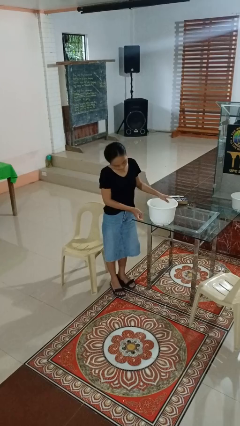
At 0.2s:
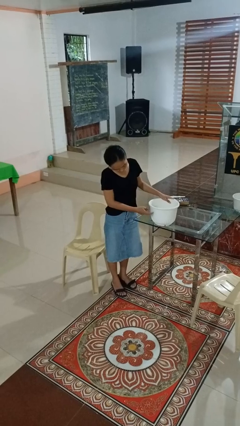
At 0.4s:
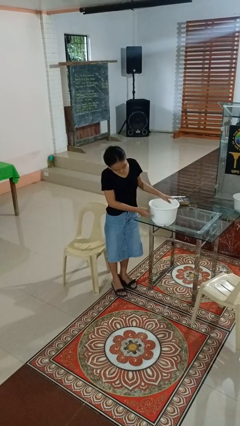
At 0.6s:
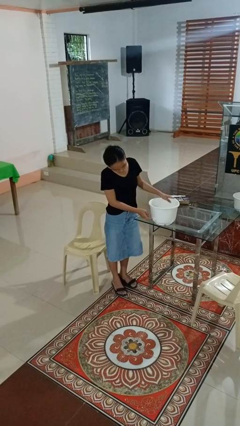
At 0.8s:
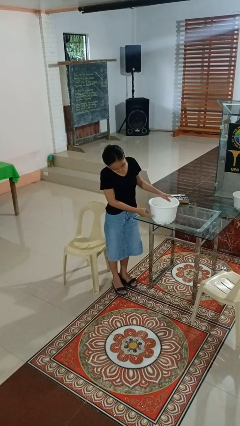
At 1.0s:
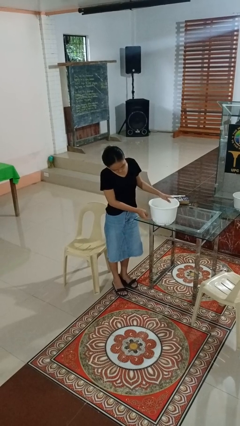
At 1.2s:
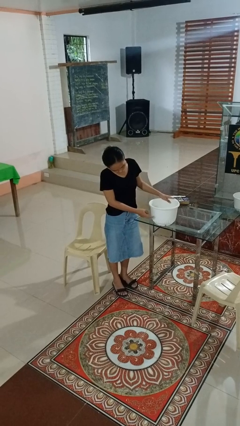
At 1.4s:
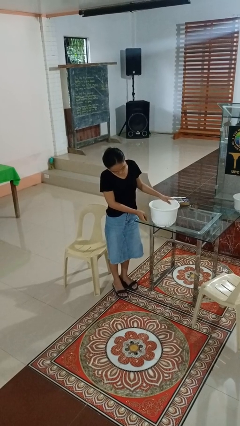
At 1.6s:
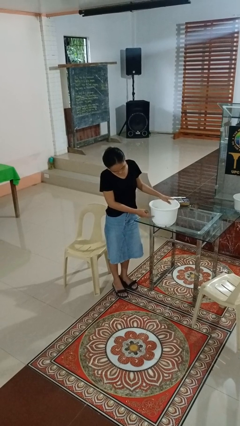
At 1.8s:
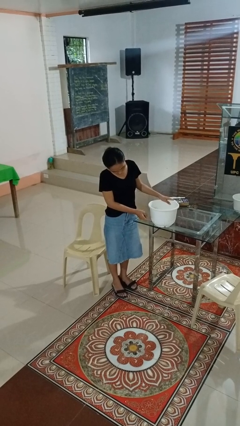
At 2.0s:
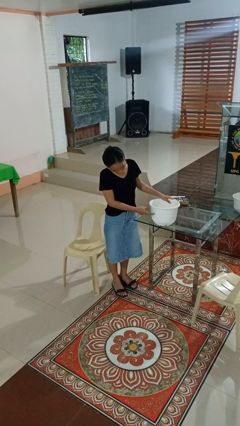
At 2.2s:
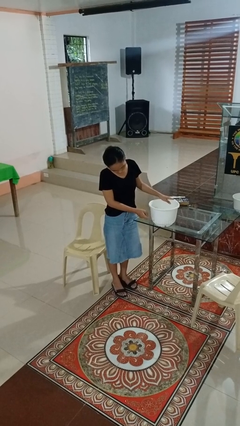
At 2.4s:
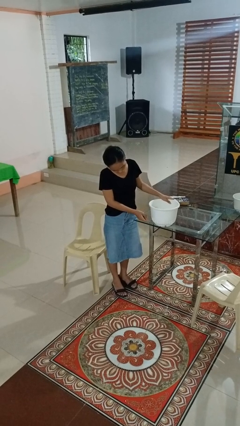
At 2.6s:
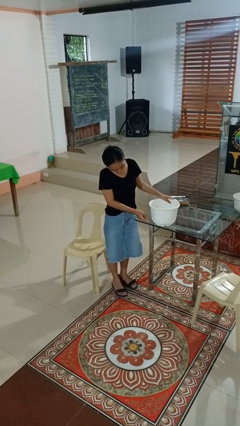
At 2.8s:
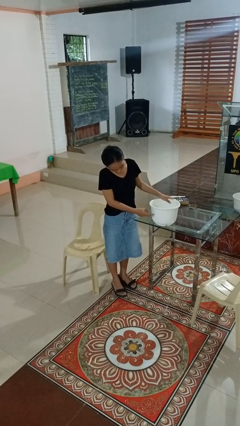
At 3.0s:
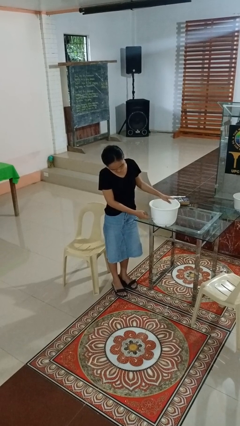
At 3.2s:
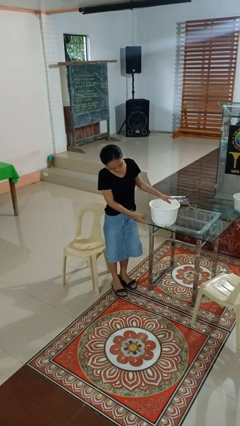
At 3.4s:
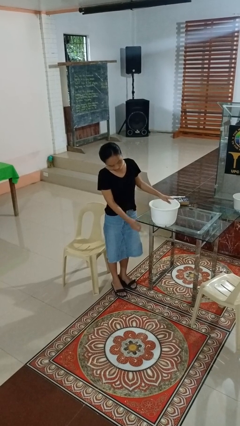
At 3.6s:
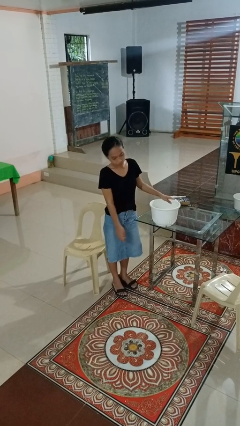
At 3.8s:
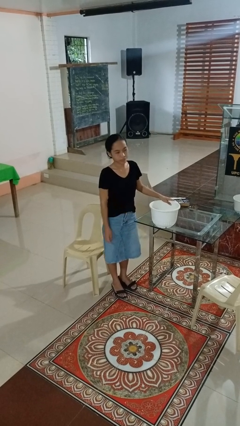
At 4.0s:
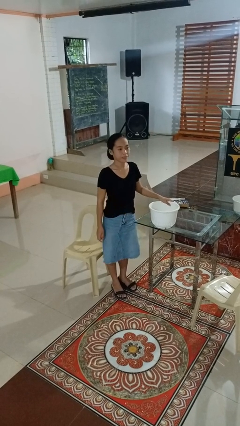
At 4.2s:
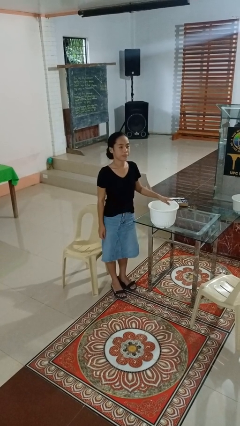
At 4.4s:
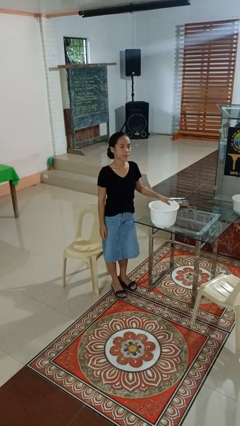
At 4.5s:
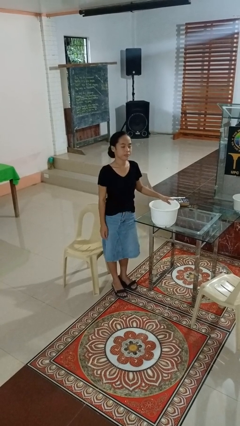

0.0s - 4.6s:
person taps object with finger

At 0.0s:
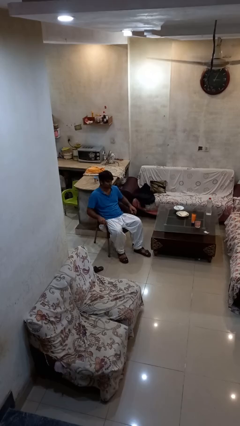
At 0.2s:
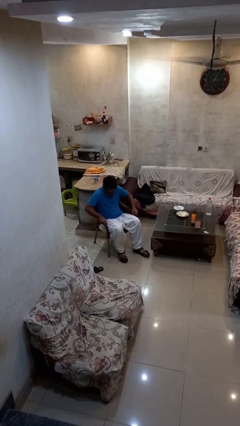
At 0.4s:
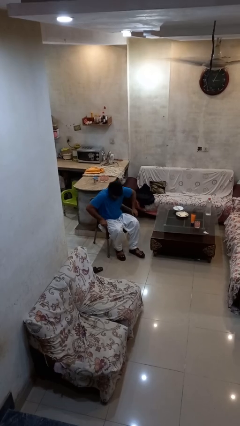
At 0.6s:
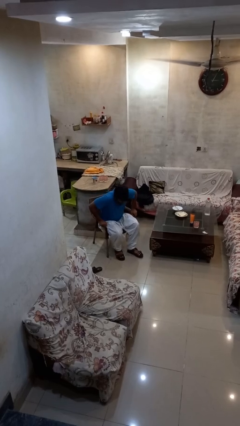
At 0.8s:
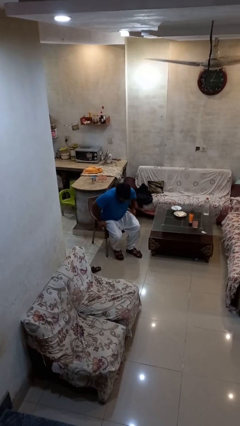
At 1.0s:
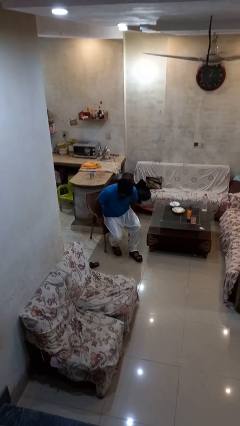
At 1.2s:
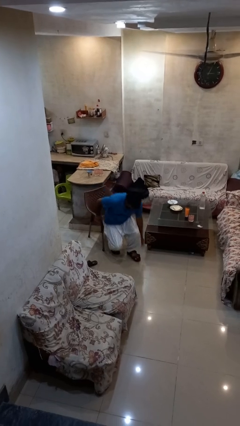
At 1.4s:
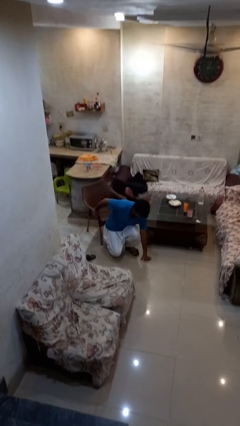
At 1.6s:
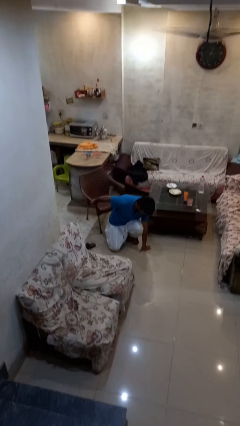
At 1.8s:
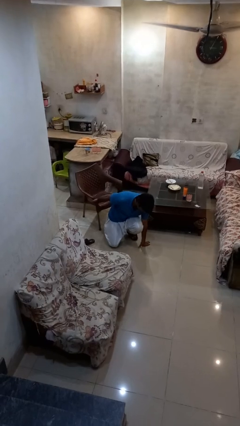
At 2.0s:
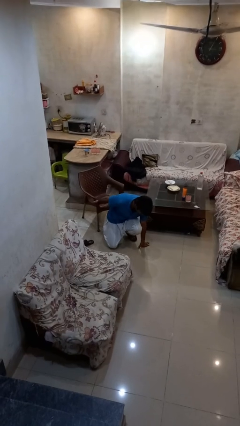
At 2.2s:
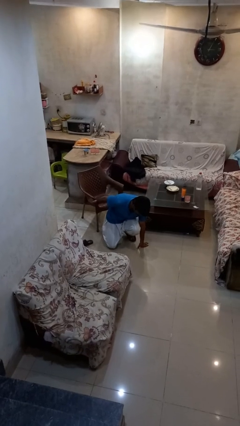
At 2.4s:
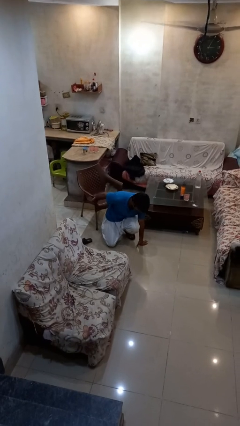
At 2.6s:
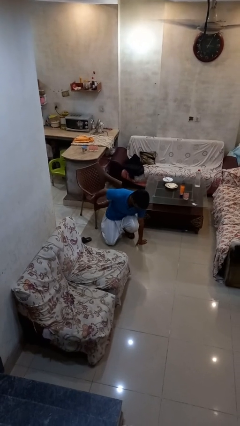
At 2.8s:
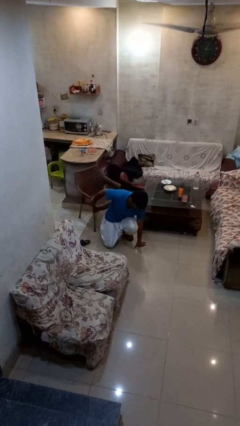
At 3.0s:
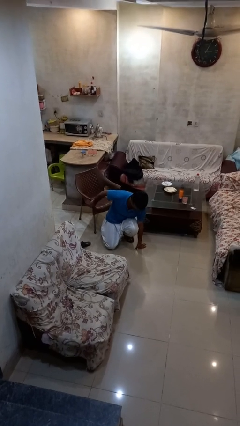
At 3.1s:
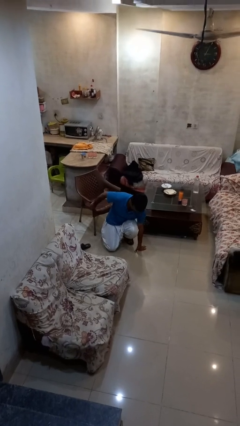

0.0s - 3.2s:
person falls from chair

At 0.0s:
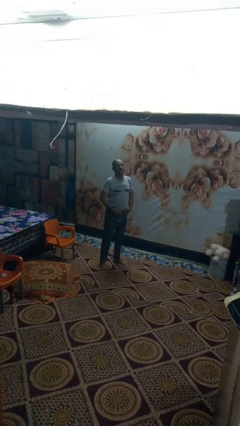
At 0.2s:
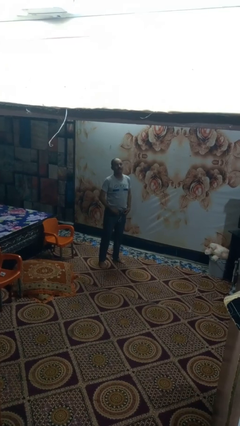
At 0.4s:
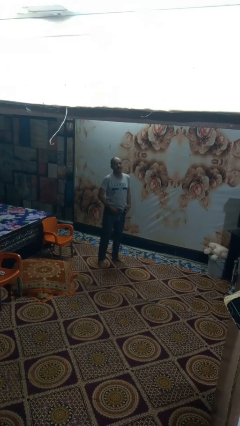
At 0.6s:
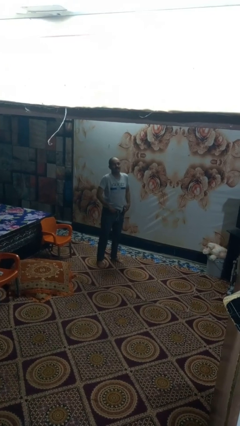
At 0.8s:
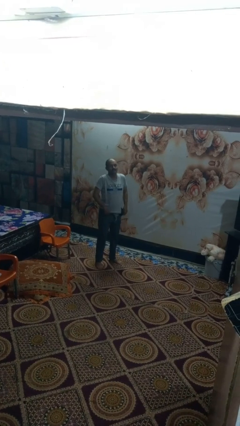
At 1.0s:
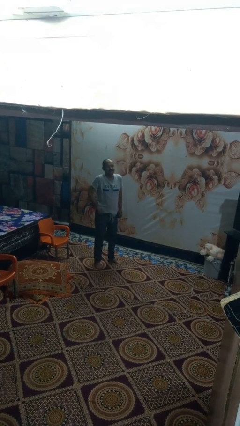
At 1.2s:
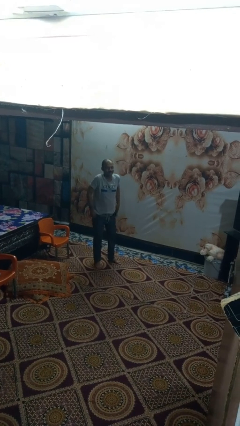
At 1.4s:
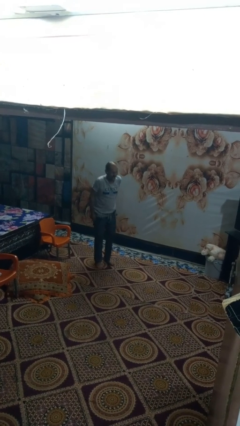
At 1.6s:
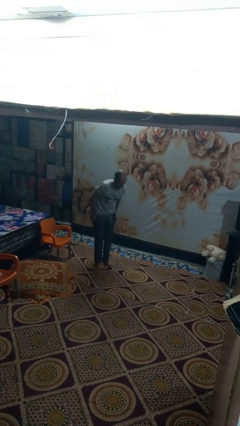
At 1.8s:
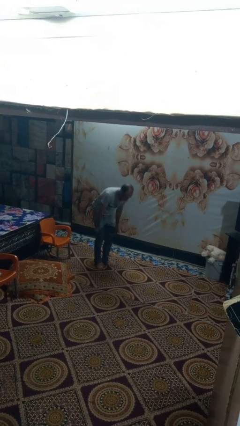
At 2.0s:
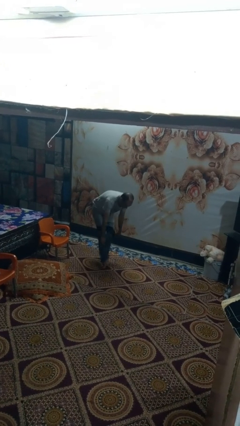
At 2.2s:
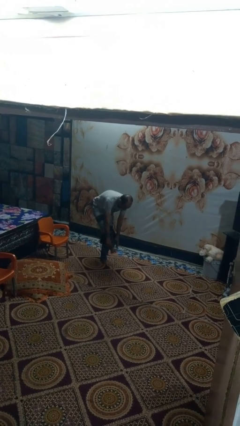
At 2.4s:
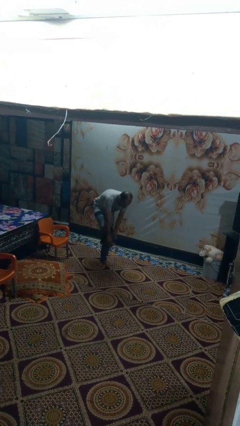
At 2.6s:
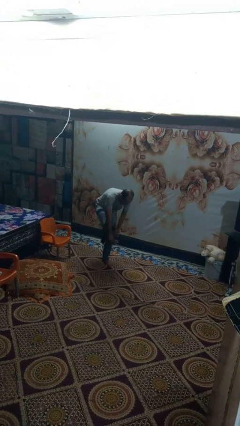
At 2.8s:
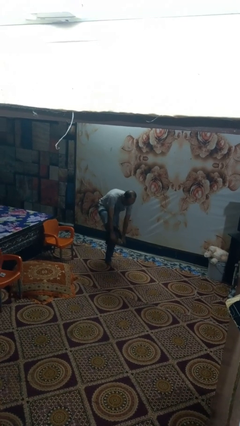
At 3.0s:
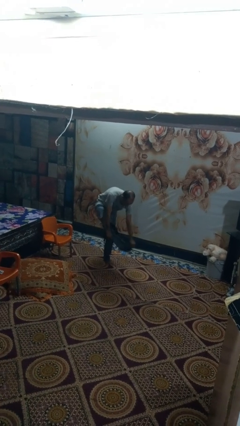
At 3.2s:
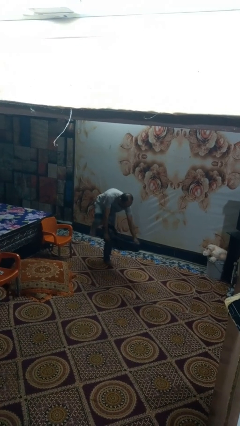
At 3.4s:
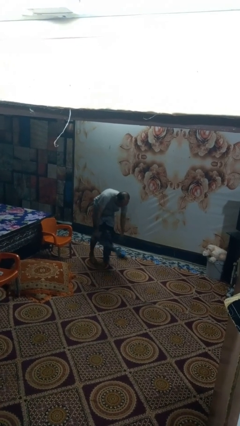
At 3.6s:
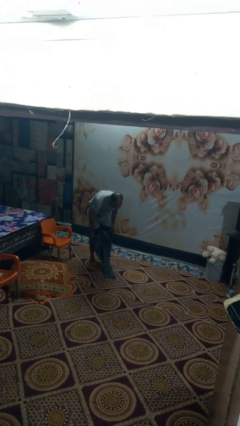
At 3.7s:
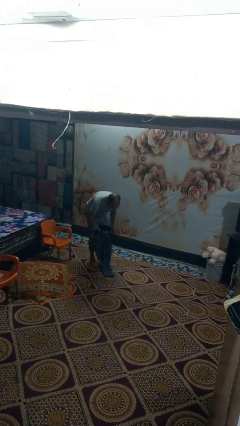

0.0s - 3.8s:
person takes off pants

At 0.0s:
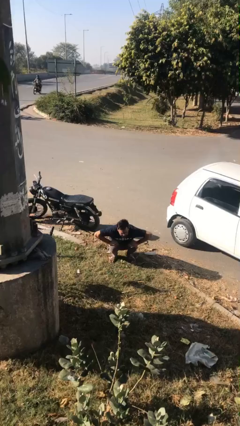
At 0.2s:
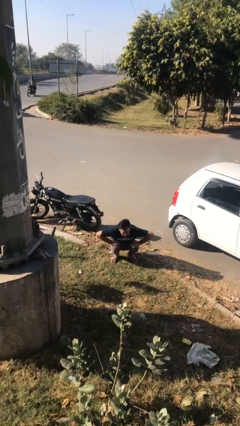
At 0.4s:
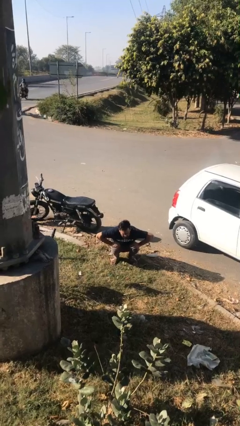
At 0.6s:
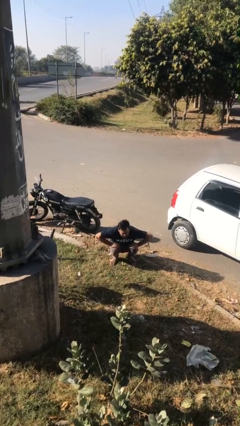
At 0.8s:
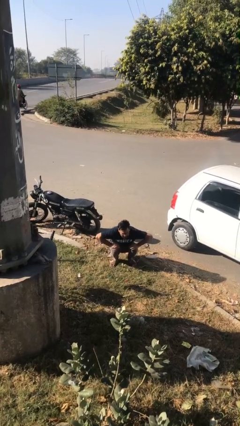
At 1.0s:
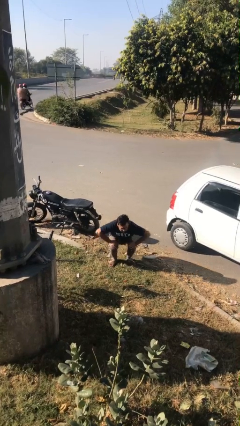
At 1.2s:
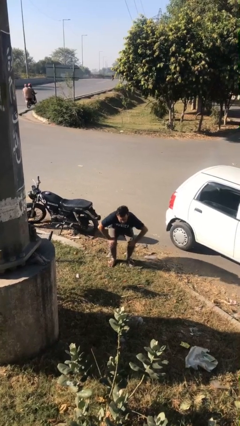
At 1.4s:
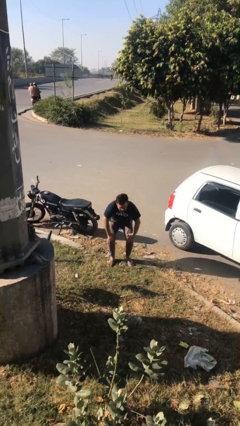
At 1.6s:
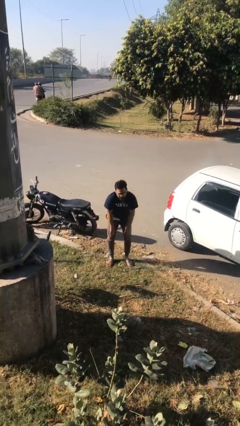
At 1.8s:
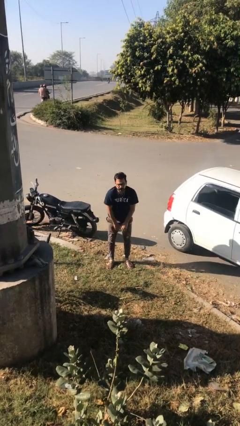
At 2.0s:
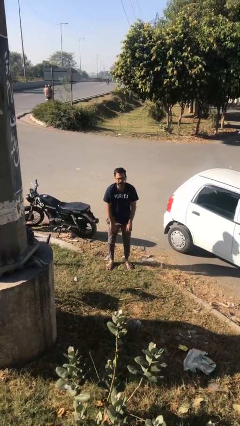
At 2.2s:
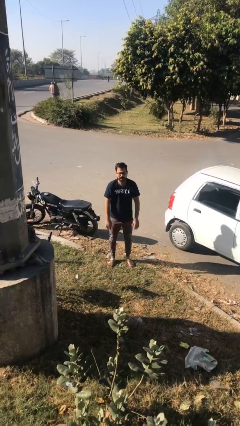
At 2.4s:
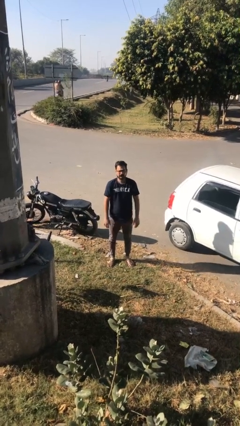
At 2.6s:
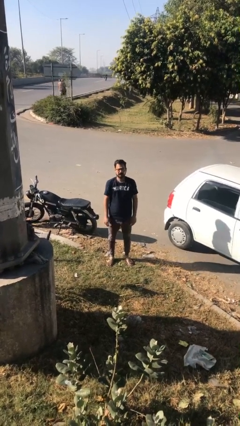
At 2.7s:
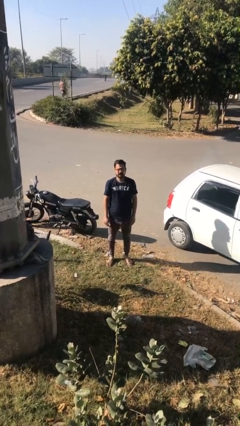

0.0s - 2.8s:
person stands up

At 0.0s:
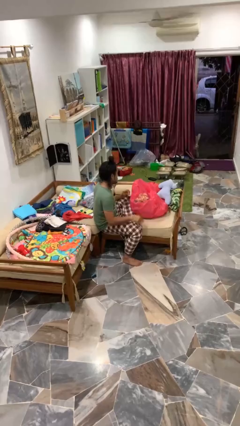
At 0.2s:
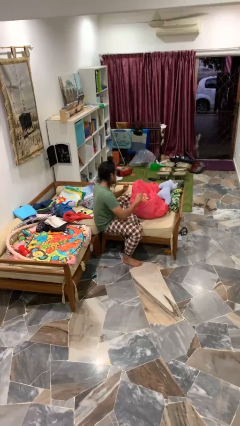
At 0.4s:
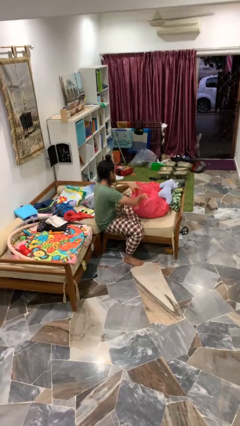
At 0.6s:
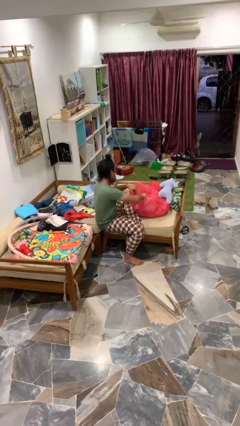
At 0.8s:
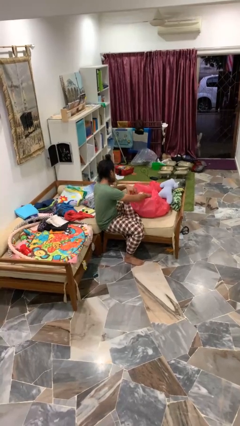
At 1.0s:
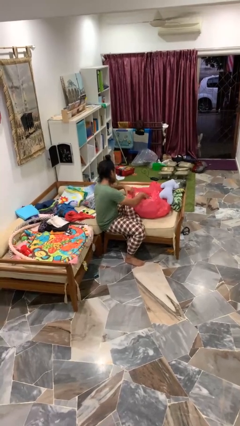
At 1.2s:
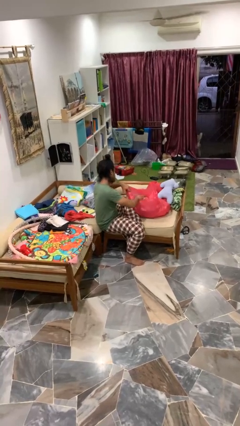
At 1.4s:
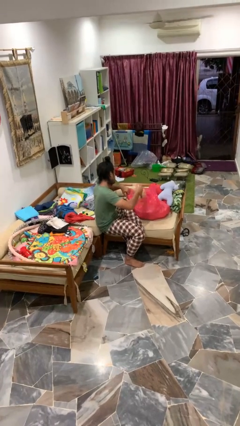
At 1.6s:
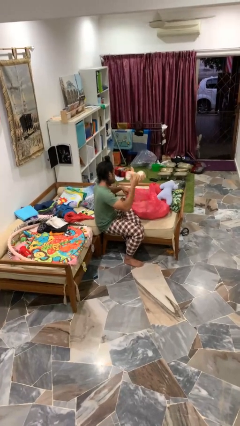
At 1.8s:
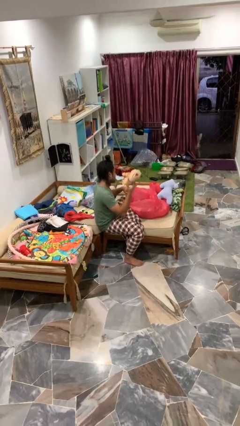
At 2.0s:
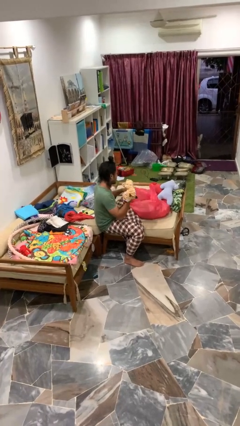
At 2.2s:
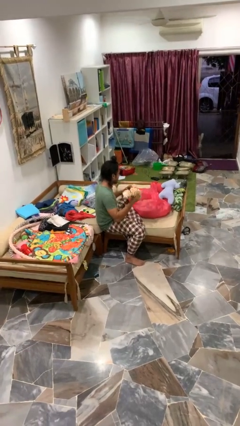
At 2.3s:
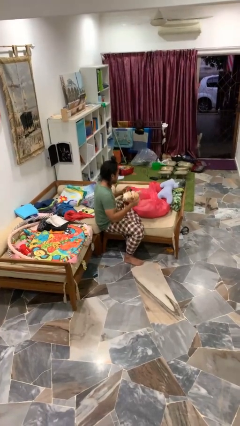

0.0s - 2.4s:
person takes object from bag

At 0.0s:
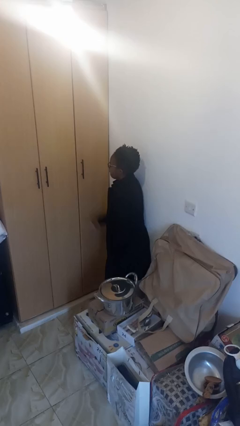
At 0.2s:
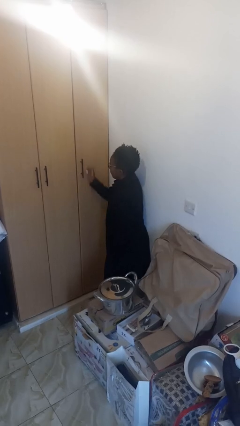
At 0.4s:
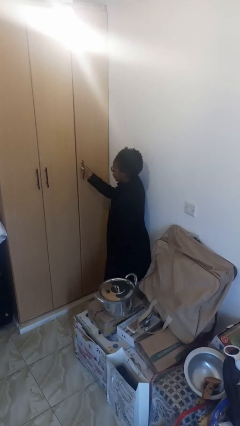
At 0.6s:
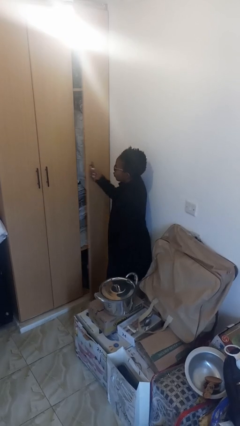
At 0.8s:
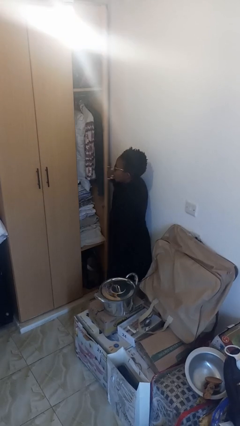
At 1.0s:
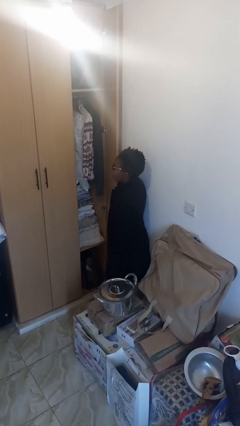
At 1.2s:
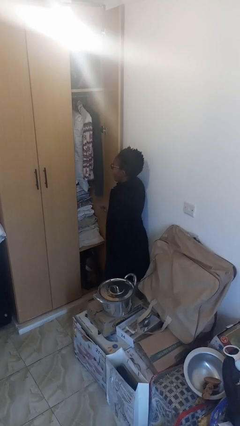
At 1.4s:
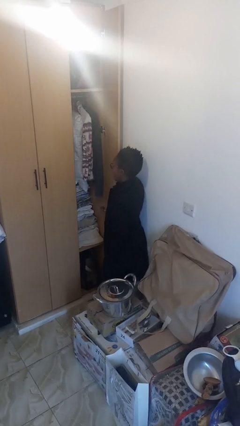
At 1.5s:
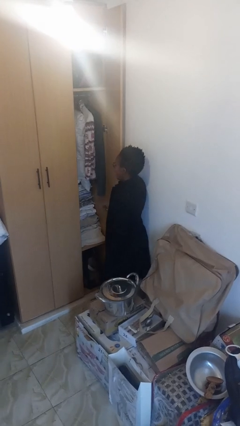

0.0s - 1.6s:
person opens closet door
